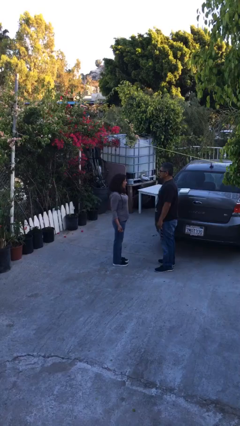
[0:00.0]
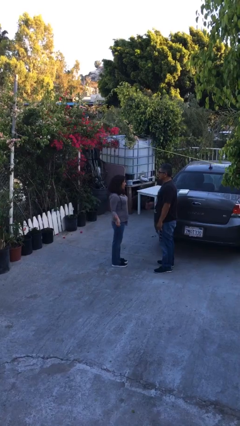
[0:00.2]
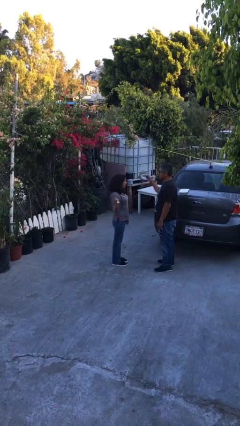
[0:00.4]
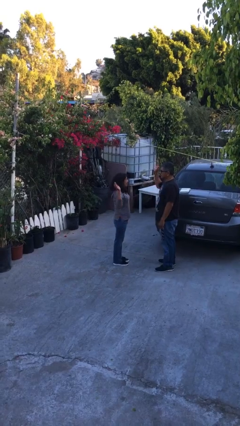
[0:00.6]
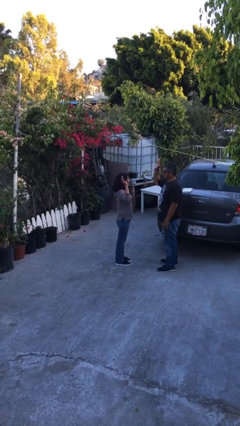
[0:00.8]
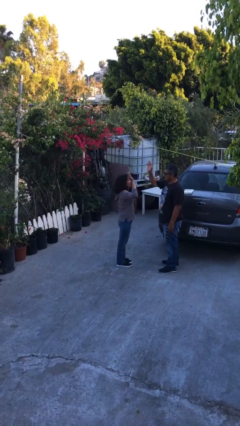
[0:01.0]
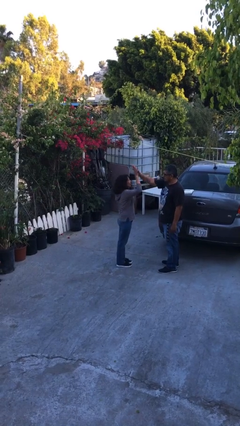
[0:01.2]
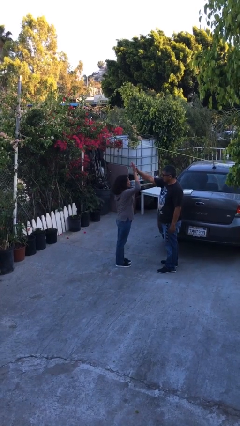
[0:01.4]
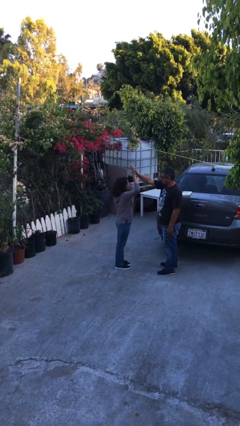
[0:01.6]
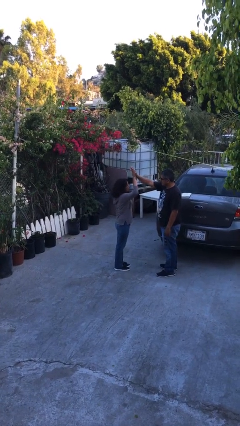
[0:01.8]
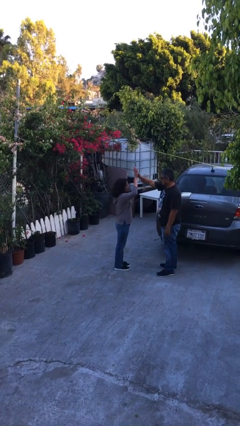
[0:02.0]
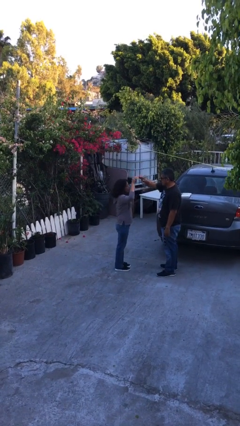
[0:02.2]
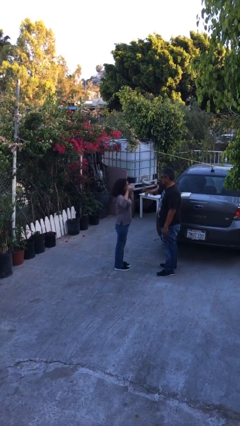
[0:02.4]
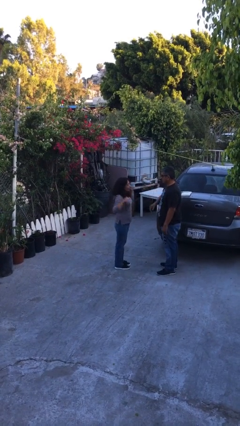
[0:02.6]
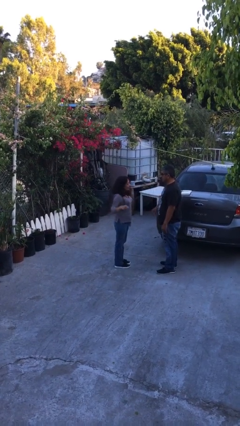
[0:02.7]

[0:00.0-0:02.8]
person highfives hand

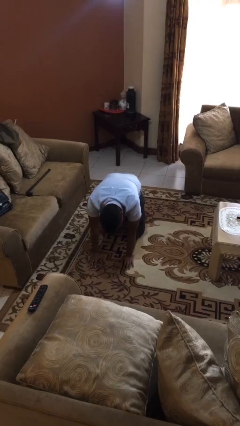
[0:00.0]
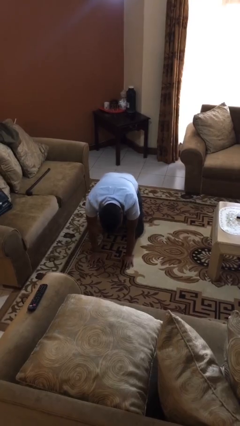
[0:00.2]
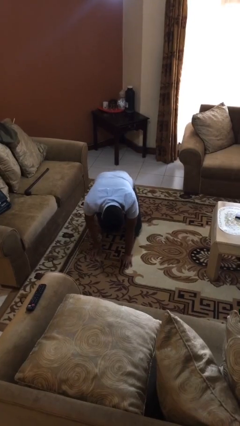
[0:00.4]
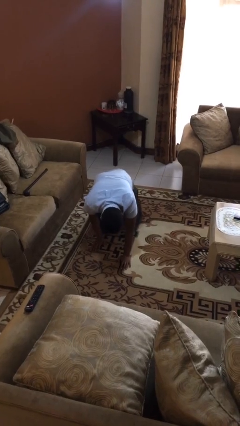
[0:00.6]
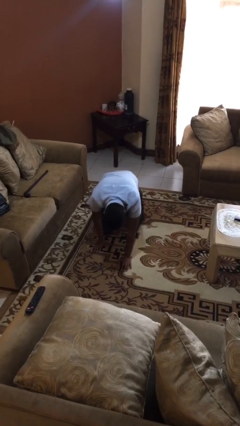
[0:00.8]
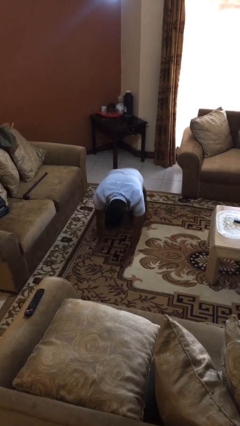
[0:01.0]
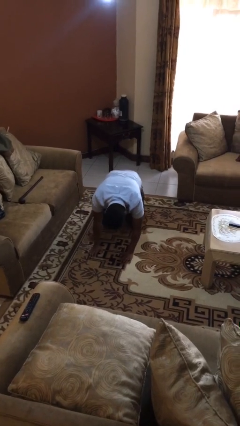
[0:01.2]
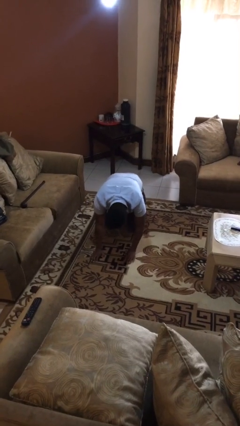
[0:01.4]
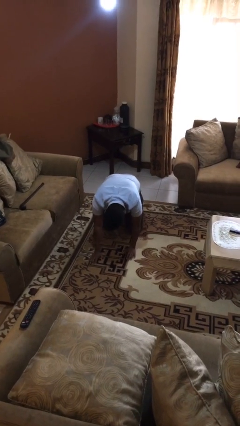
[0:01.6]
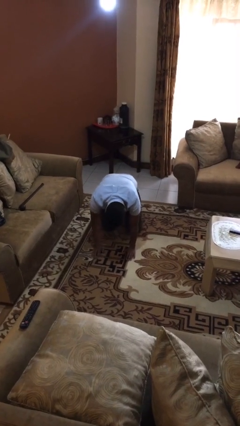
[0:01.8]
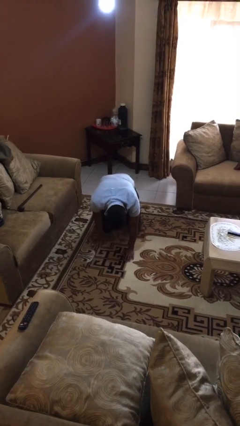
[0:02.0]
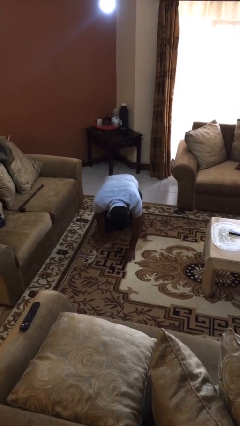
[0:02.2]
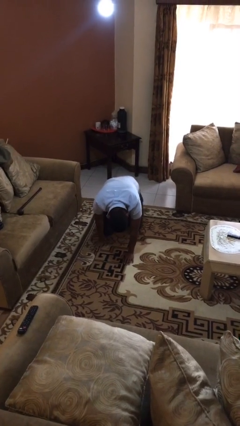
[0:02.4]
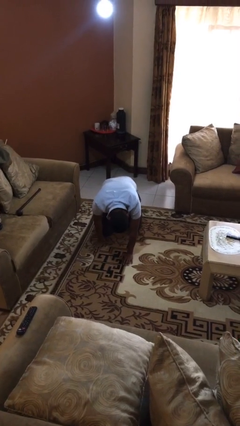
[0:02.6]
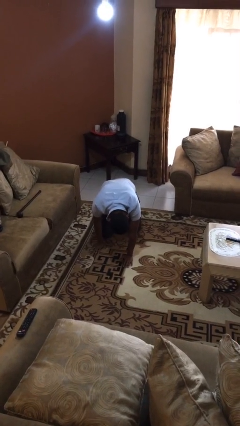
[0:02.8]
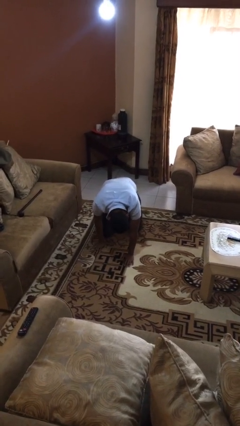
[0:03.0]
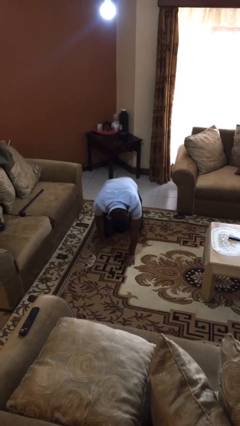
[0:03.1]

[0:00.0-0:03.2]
person crawls

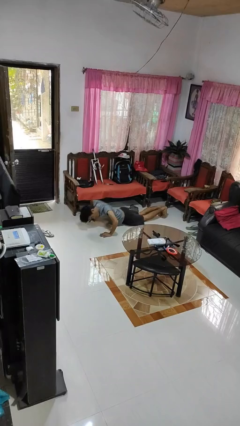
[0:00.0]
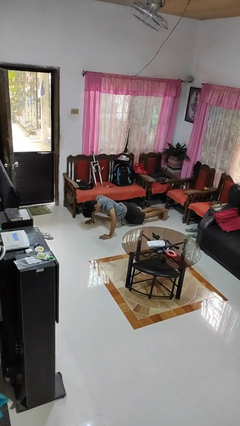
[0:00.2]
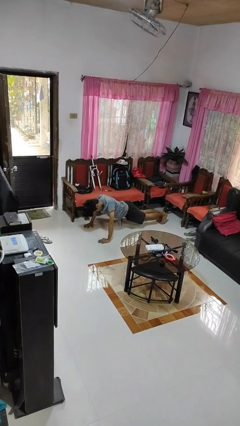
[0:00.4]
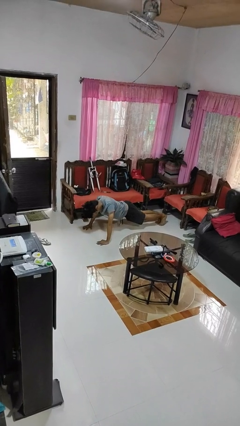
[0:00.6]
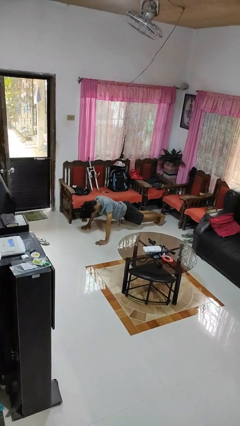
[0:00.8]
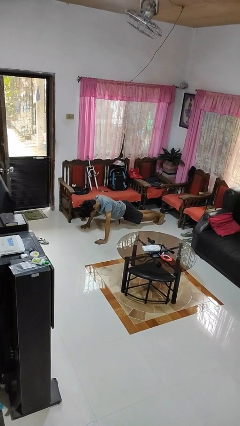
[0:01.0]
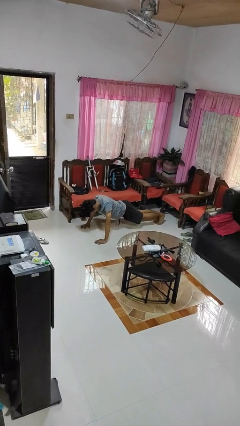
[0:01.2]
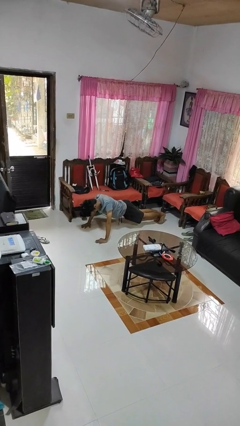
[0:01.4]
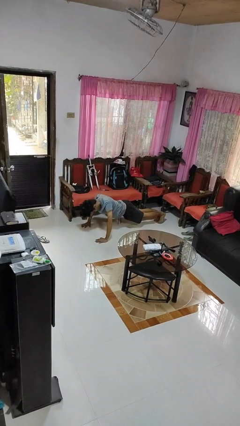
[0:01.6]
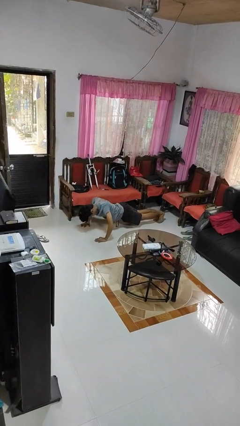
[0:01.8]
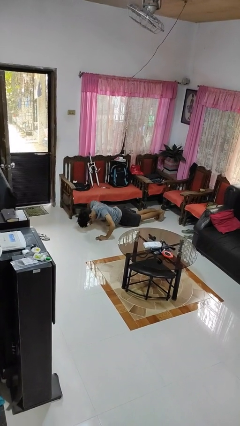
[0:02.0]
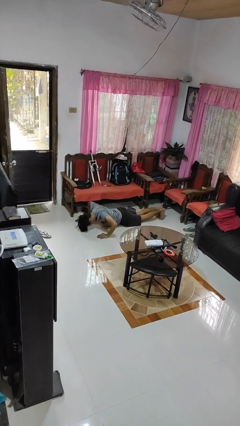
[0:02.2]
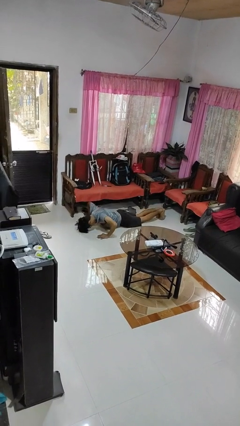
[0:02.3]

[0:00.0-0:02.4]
person exercises with pushup

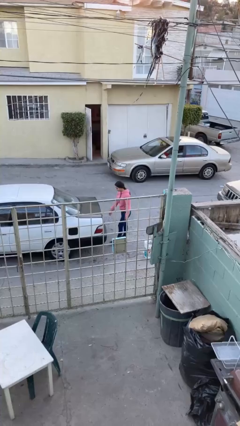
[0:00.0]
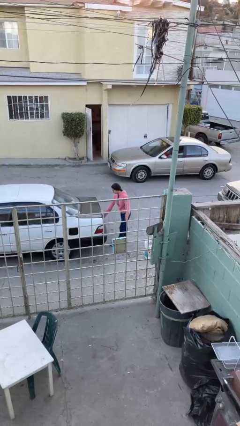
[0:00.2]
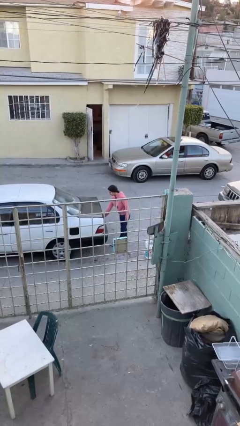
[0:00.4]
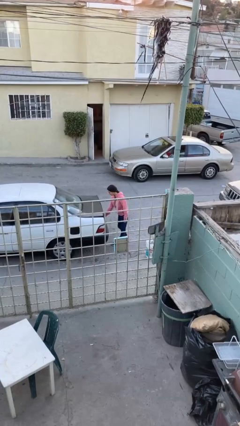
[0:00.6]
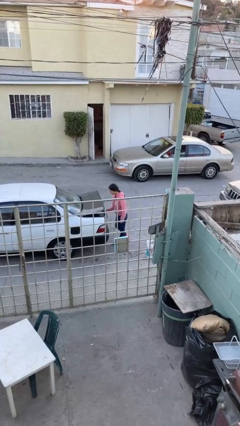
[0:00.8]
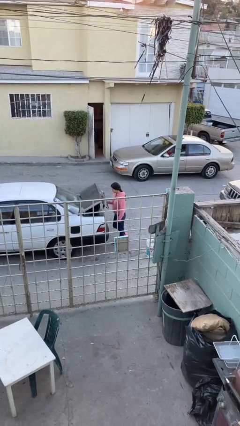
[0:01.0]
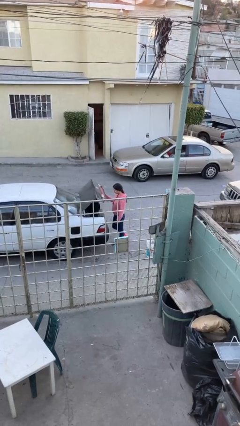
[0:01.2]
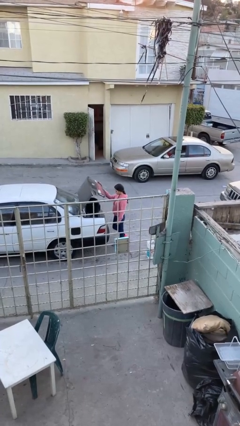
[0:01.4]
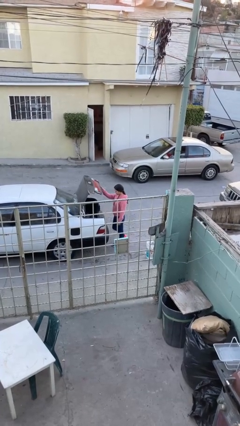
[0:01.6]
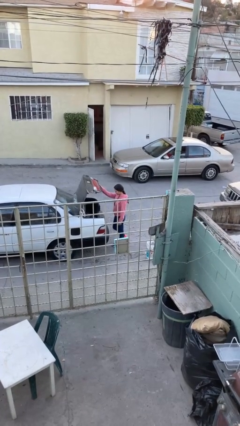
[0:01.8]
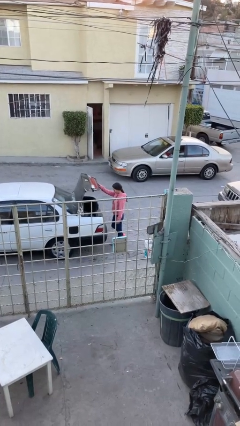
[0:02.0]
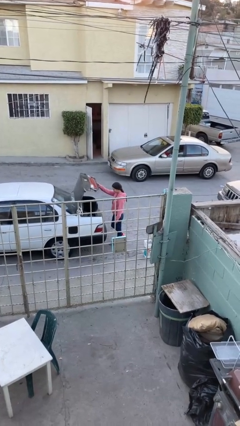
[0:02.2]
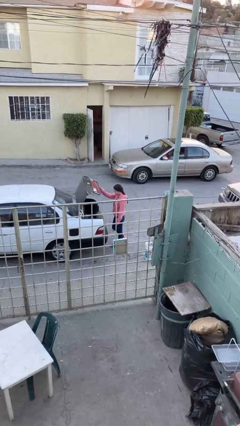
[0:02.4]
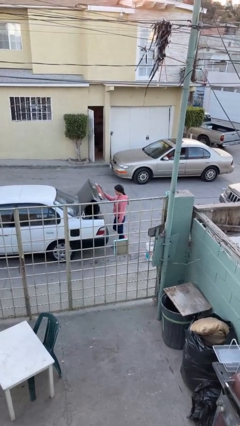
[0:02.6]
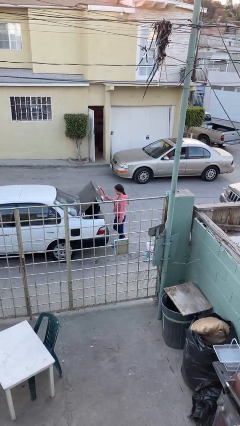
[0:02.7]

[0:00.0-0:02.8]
person opens car trunk

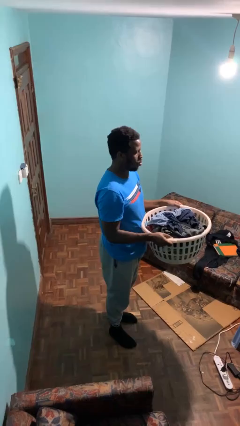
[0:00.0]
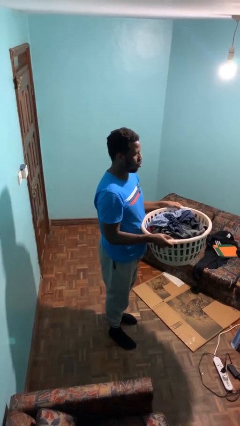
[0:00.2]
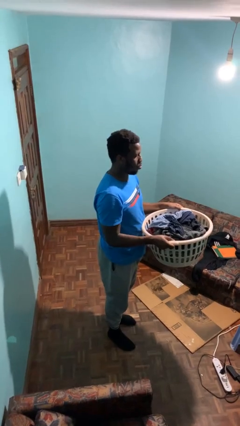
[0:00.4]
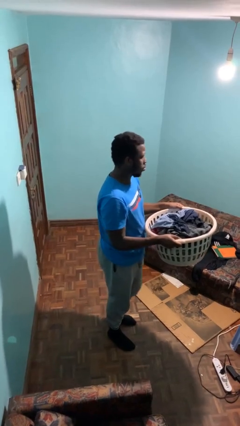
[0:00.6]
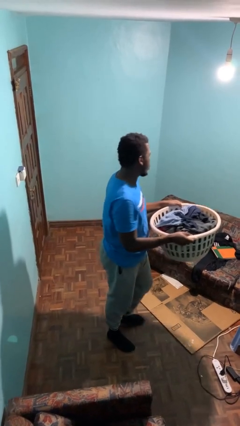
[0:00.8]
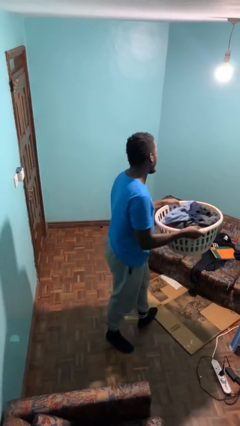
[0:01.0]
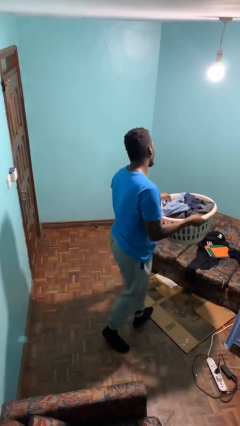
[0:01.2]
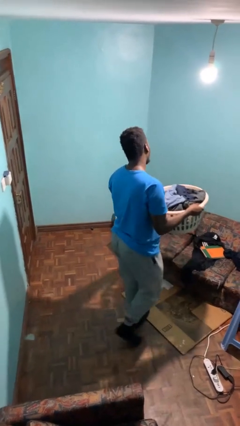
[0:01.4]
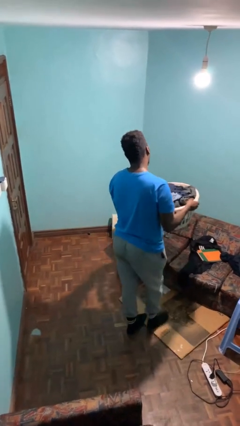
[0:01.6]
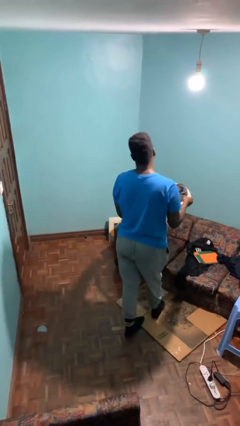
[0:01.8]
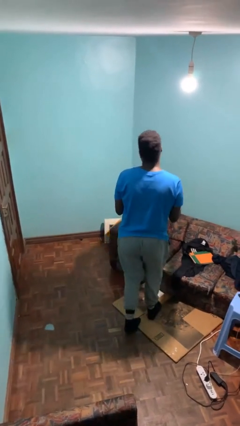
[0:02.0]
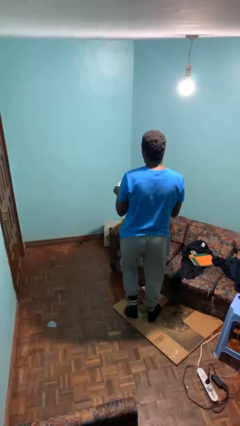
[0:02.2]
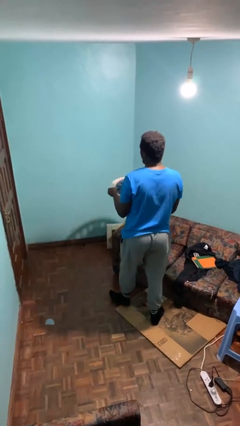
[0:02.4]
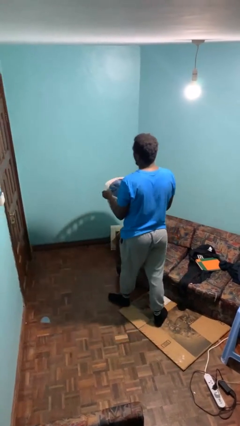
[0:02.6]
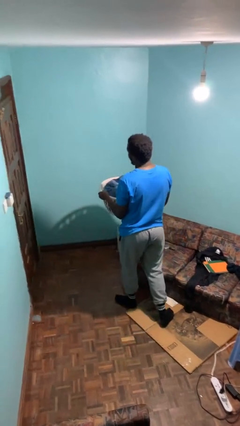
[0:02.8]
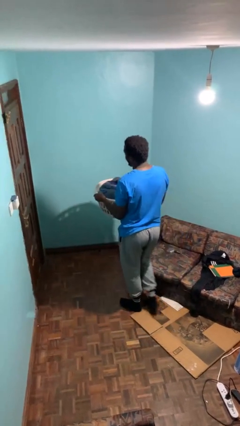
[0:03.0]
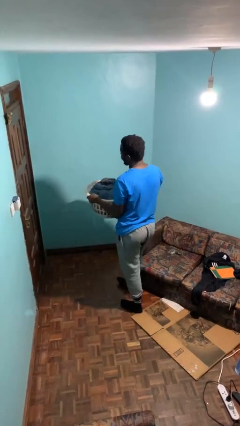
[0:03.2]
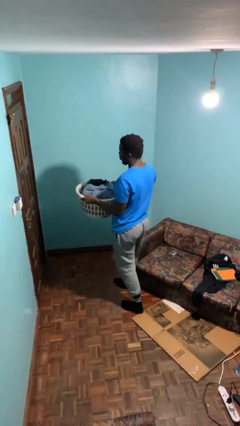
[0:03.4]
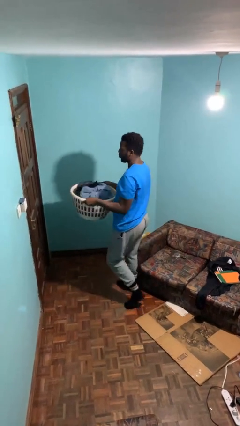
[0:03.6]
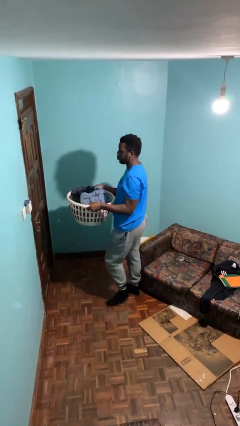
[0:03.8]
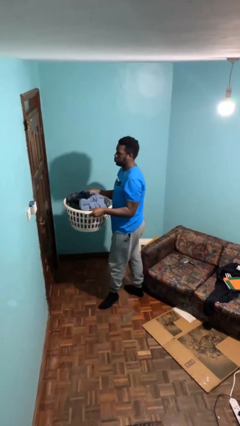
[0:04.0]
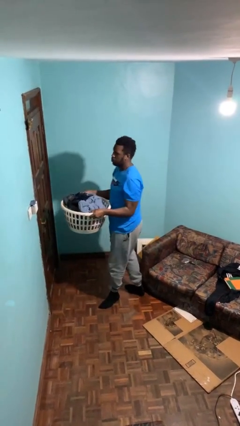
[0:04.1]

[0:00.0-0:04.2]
person carries laundry basket

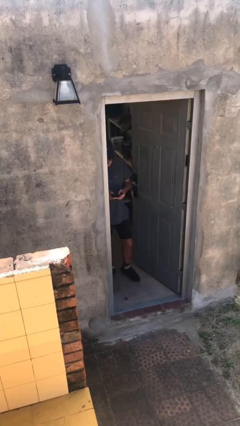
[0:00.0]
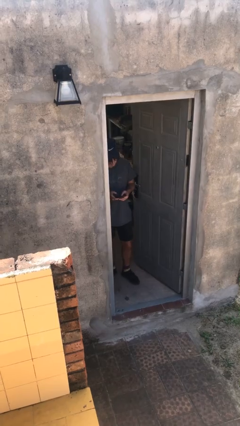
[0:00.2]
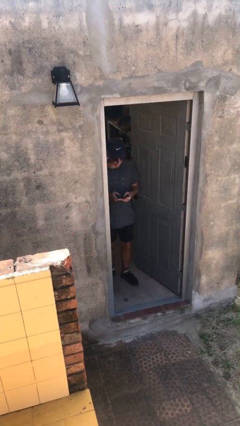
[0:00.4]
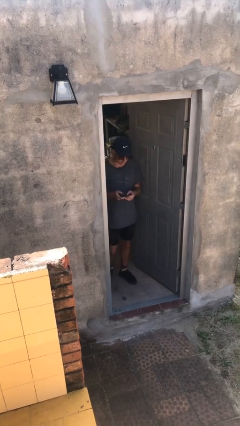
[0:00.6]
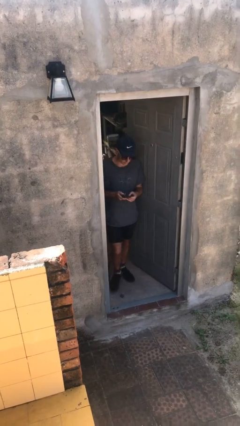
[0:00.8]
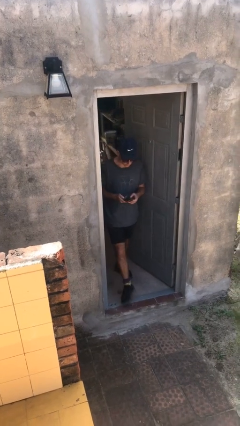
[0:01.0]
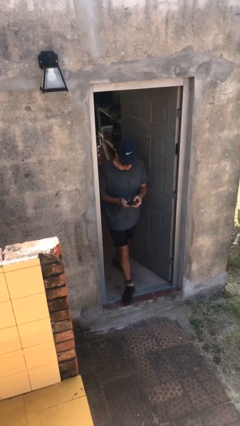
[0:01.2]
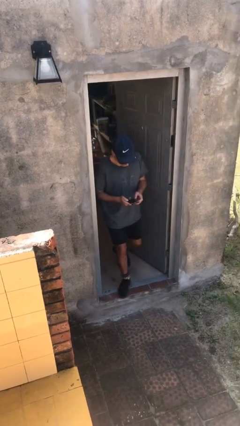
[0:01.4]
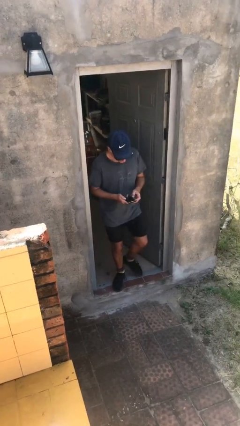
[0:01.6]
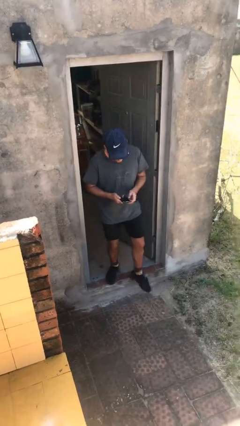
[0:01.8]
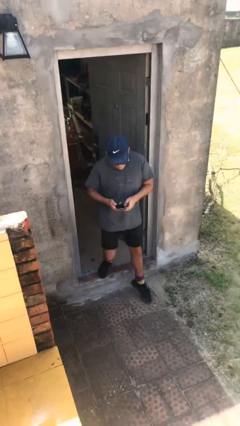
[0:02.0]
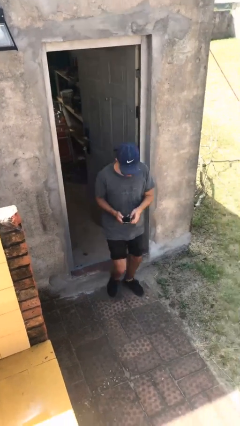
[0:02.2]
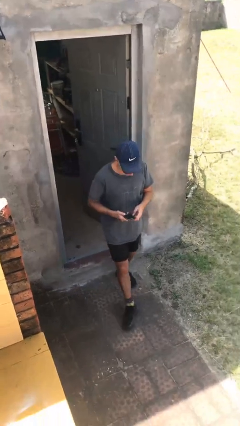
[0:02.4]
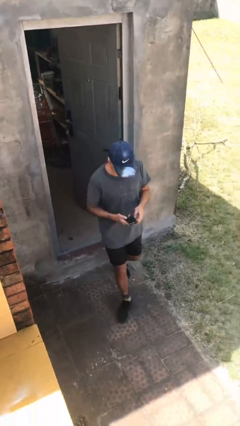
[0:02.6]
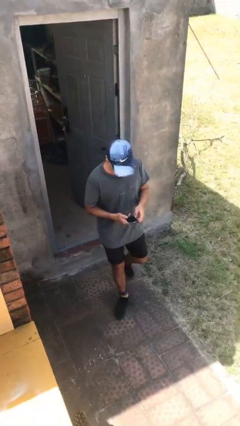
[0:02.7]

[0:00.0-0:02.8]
person enters scene through structure
